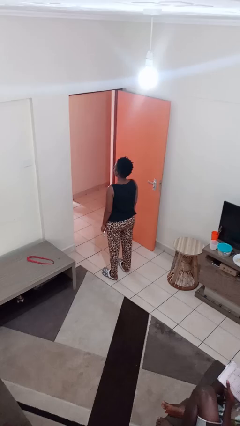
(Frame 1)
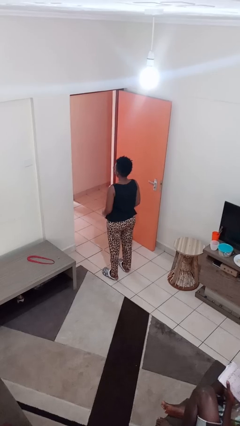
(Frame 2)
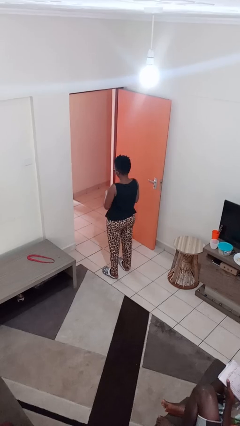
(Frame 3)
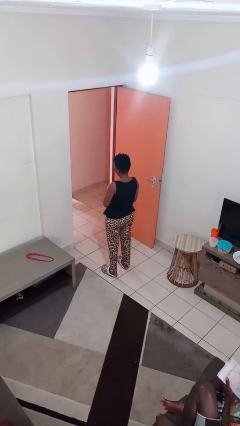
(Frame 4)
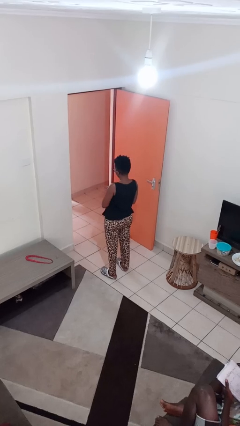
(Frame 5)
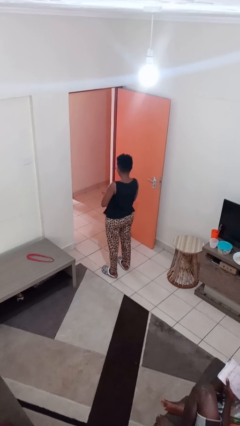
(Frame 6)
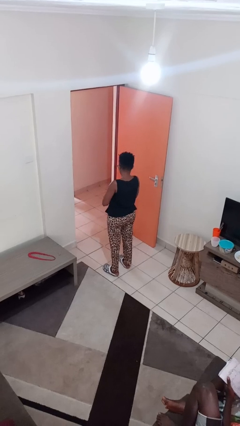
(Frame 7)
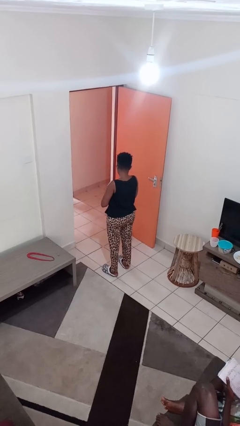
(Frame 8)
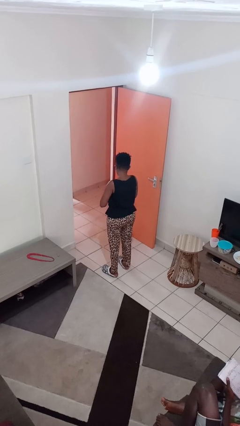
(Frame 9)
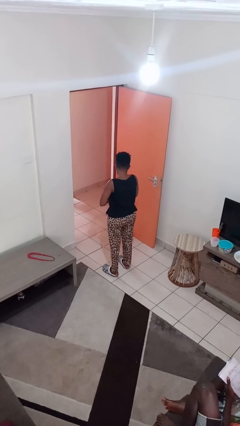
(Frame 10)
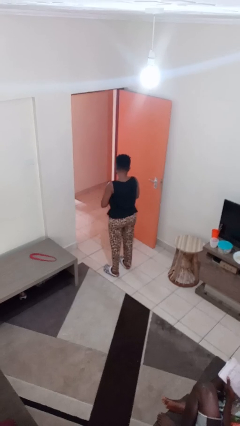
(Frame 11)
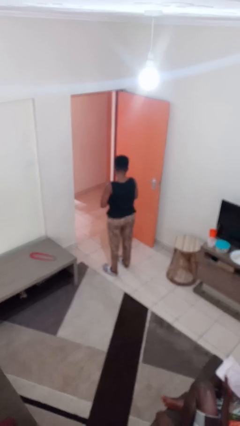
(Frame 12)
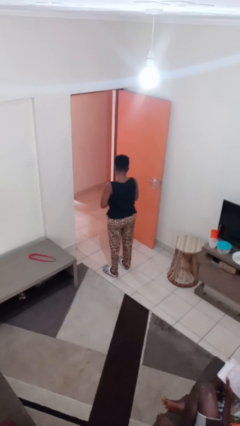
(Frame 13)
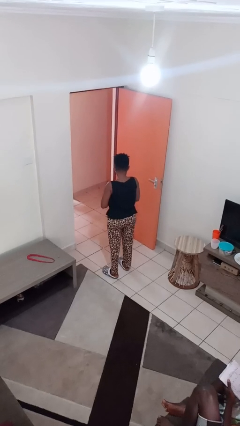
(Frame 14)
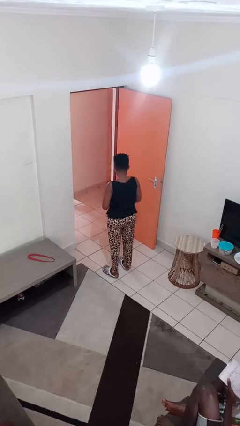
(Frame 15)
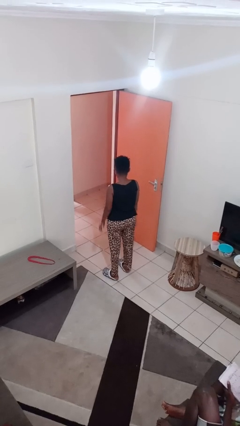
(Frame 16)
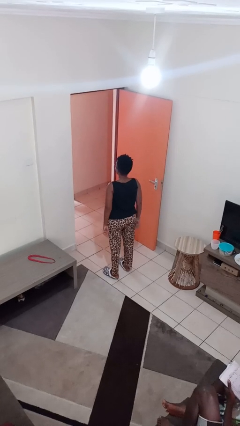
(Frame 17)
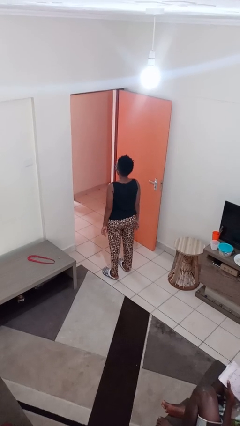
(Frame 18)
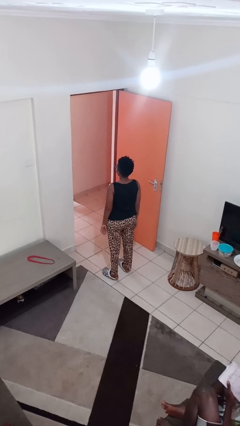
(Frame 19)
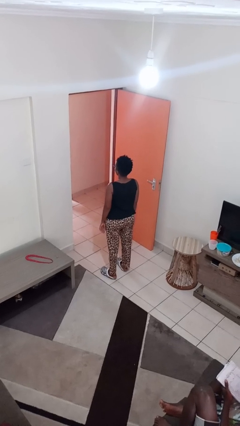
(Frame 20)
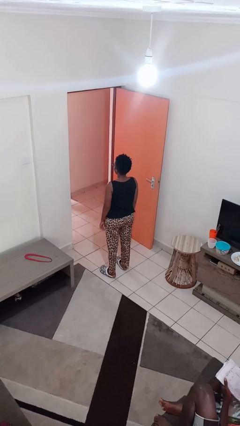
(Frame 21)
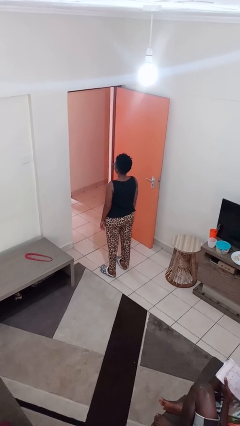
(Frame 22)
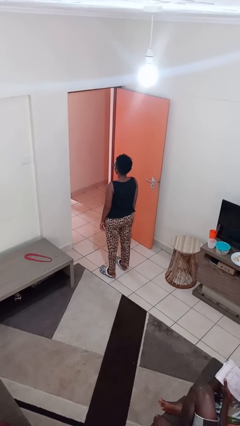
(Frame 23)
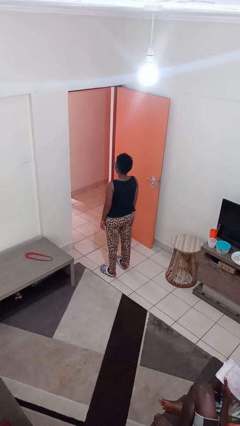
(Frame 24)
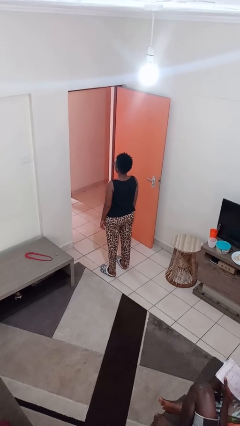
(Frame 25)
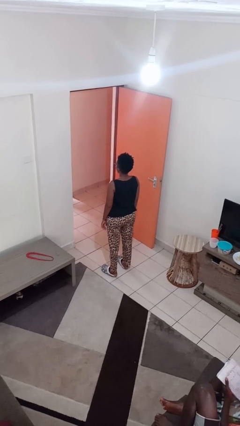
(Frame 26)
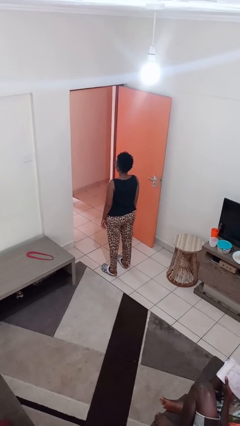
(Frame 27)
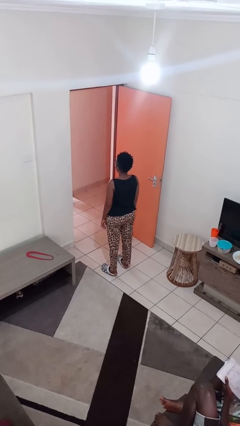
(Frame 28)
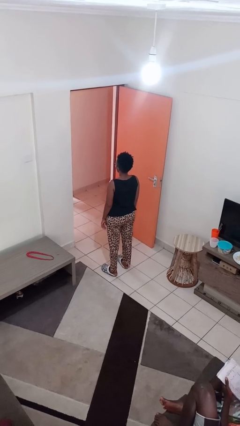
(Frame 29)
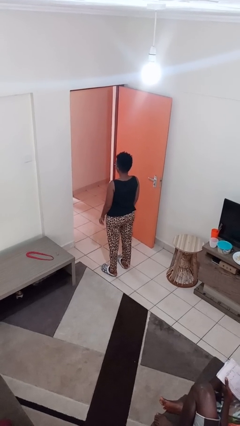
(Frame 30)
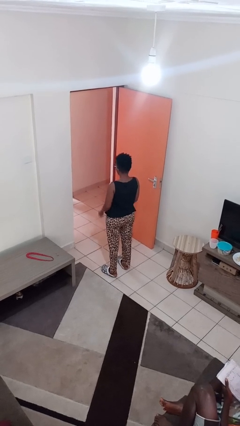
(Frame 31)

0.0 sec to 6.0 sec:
person puts on wristwatch

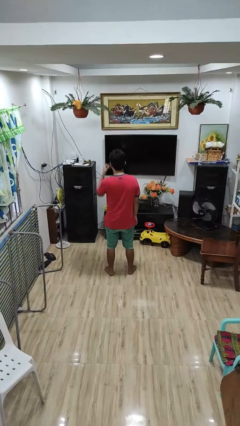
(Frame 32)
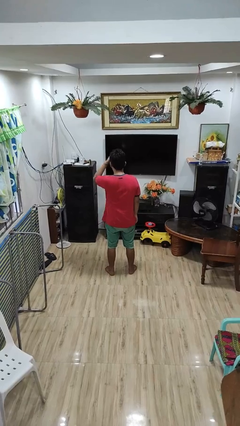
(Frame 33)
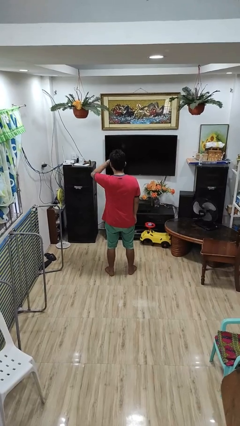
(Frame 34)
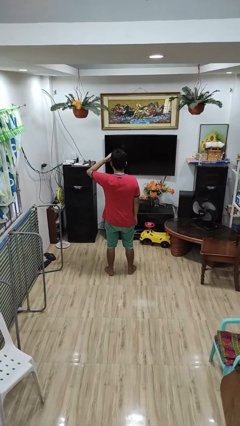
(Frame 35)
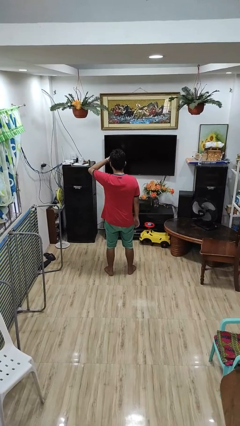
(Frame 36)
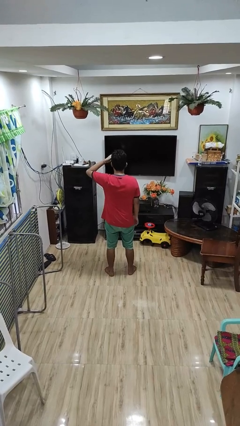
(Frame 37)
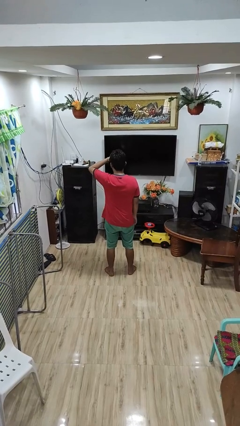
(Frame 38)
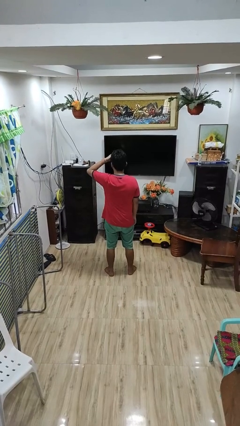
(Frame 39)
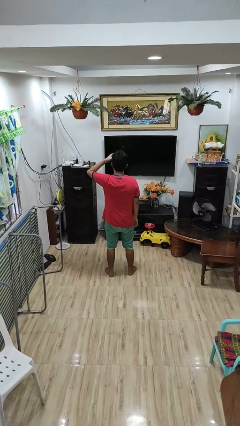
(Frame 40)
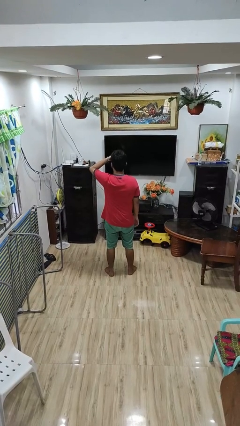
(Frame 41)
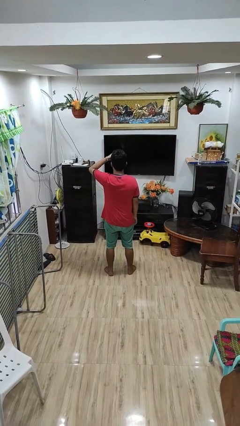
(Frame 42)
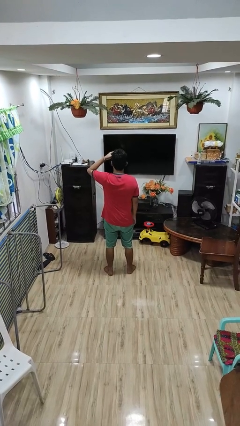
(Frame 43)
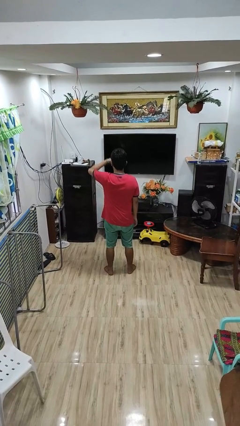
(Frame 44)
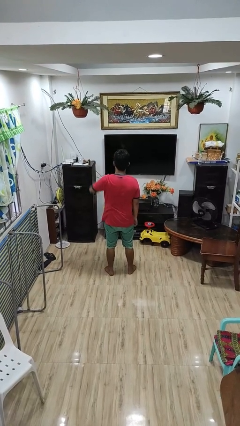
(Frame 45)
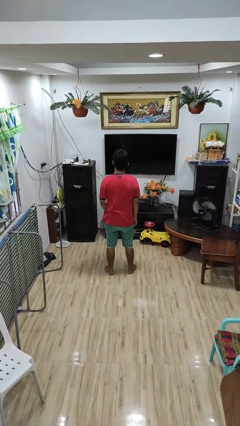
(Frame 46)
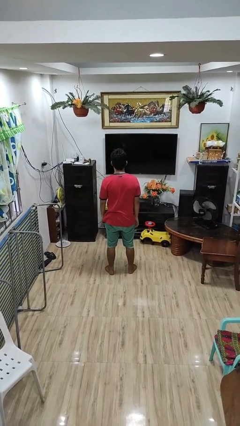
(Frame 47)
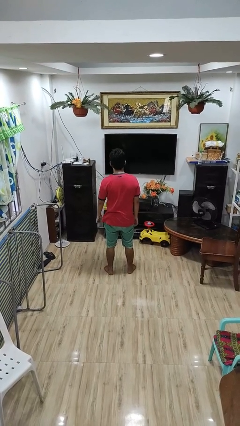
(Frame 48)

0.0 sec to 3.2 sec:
person scratches face

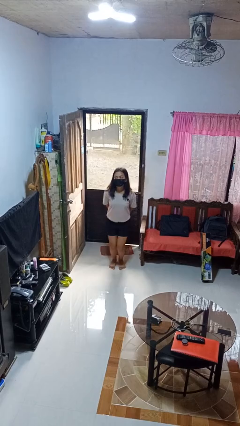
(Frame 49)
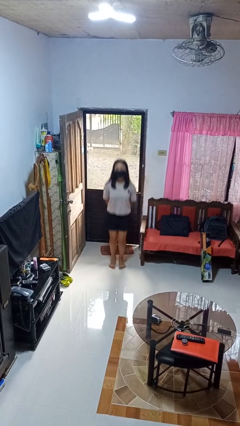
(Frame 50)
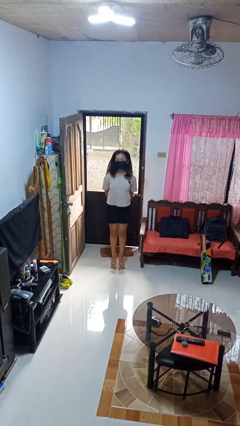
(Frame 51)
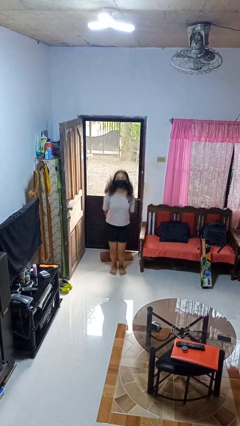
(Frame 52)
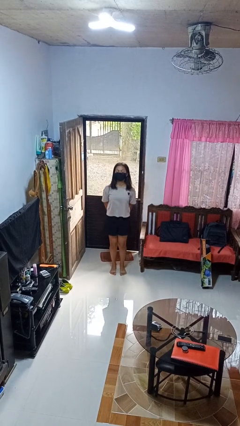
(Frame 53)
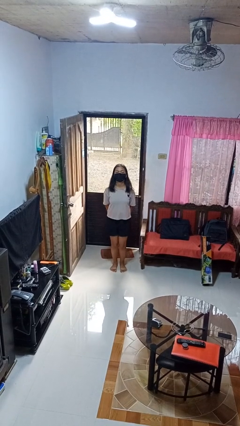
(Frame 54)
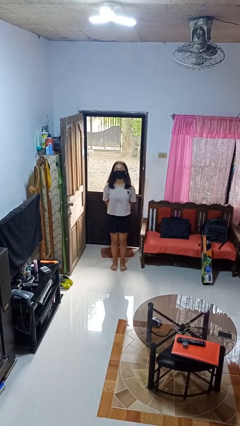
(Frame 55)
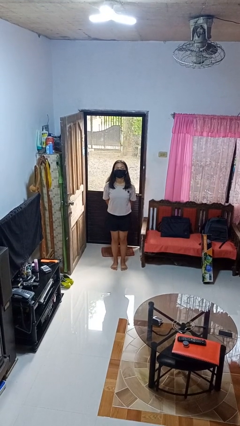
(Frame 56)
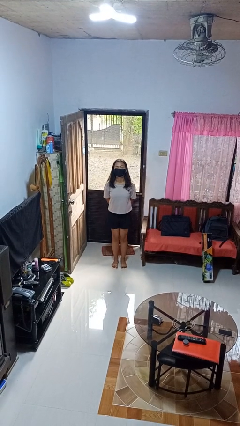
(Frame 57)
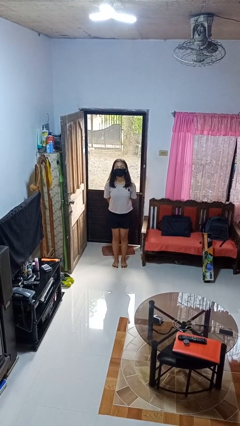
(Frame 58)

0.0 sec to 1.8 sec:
person jumps

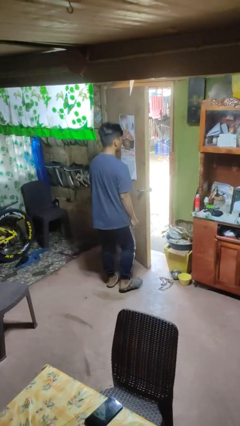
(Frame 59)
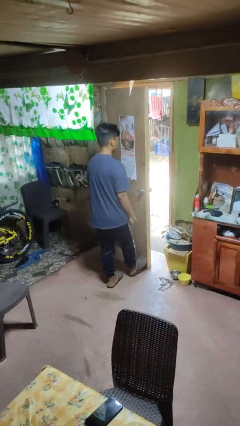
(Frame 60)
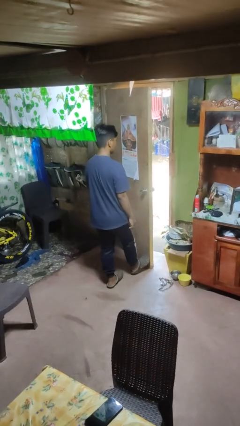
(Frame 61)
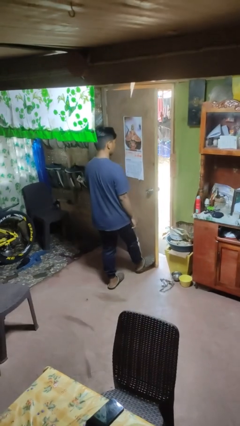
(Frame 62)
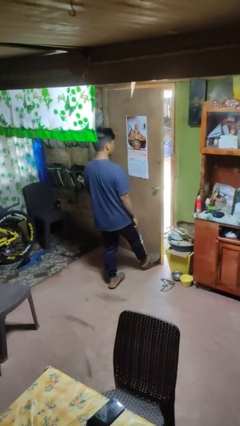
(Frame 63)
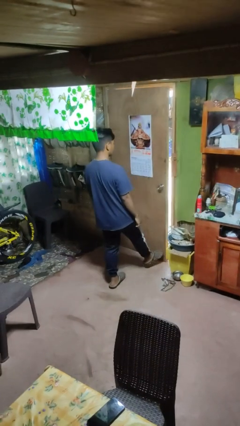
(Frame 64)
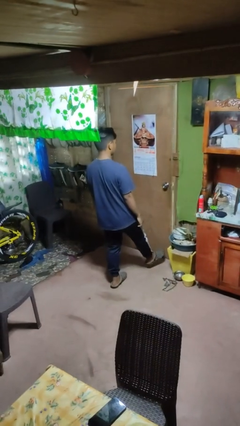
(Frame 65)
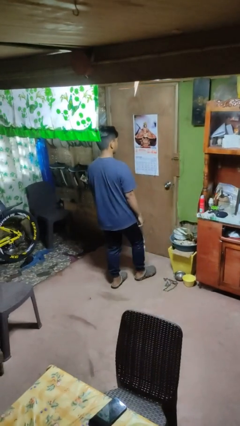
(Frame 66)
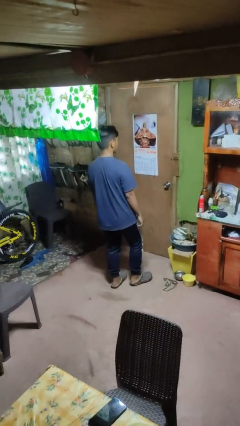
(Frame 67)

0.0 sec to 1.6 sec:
person closes door with foot

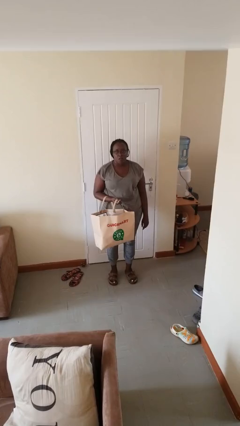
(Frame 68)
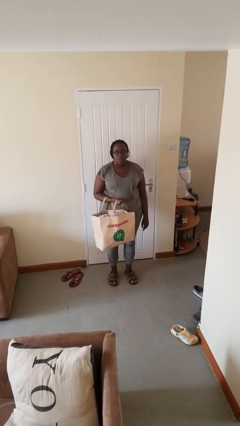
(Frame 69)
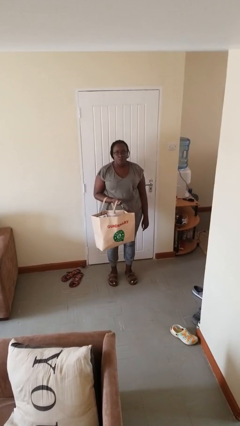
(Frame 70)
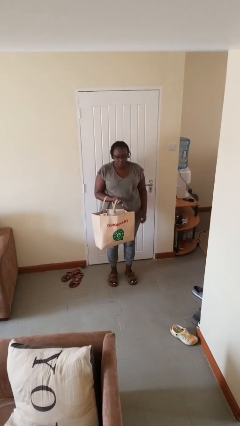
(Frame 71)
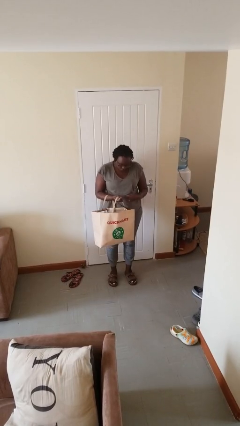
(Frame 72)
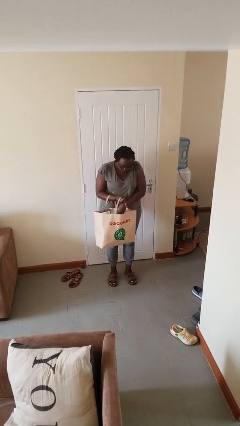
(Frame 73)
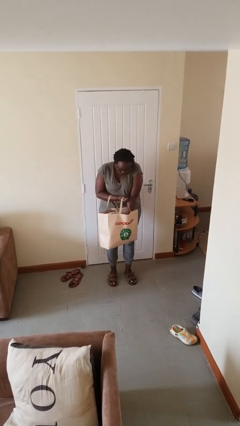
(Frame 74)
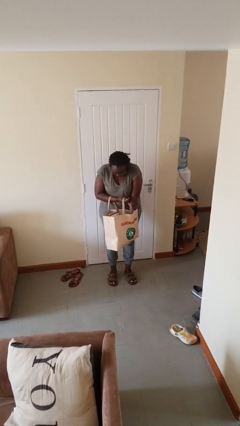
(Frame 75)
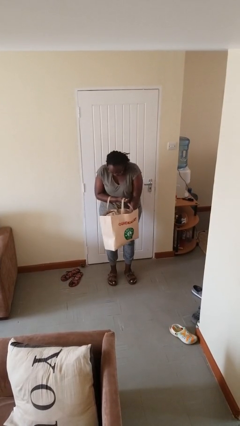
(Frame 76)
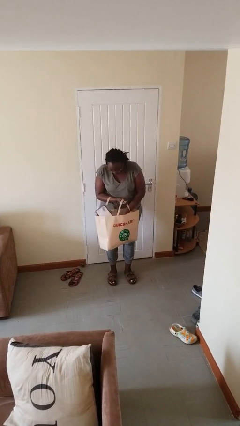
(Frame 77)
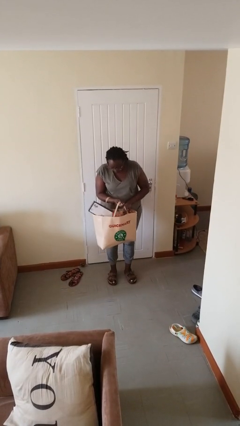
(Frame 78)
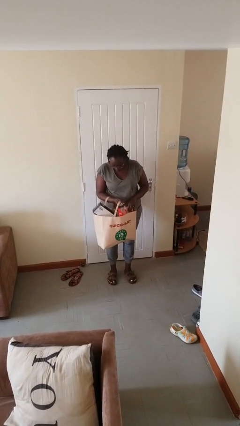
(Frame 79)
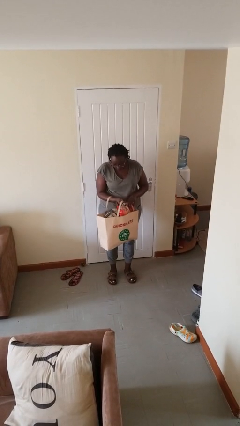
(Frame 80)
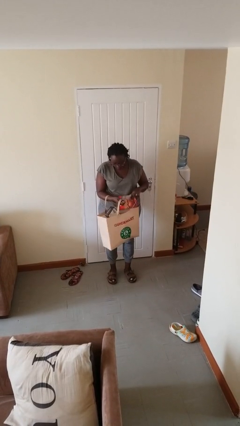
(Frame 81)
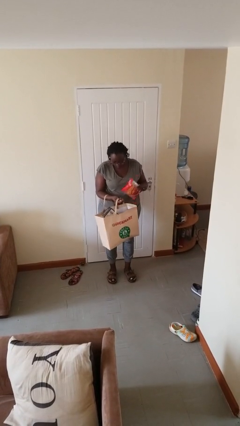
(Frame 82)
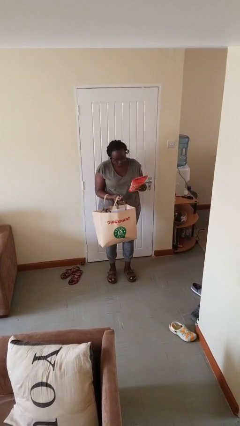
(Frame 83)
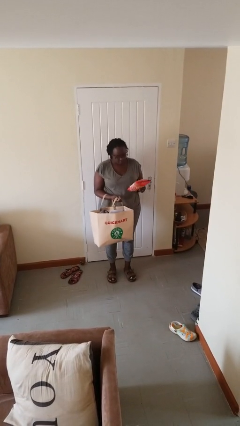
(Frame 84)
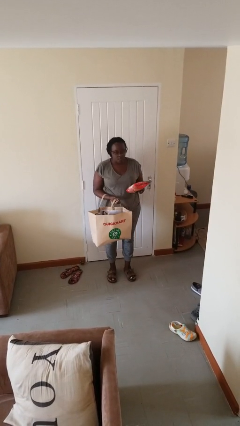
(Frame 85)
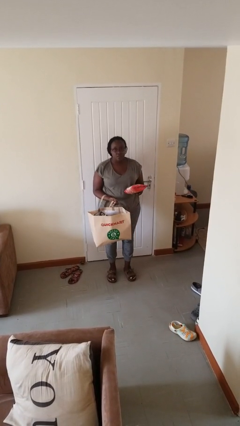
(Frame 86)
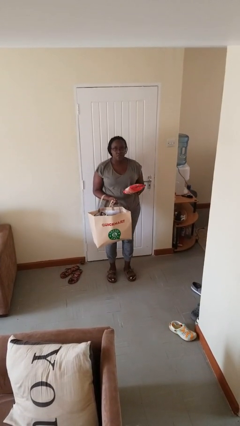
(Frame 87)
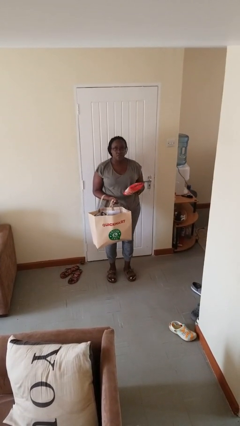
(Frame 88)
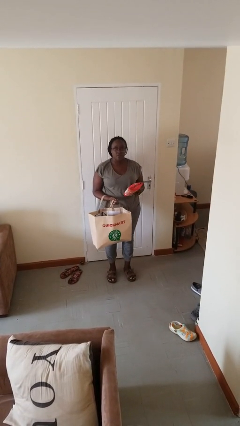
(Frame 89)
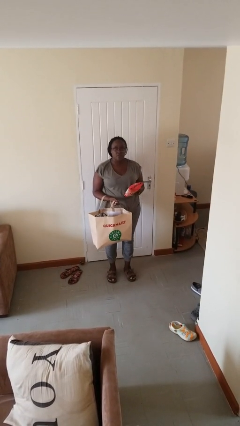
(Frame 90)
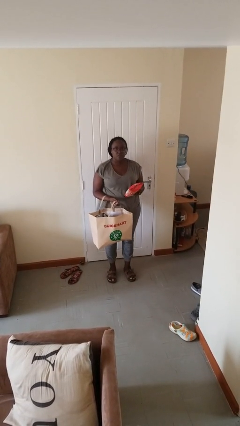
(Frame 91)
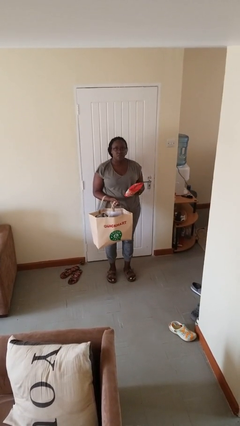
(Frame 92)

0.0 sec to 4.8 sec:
person takes object from bag
